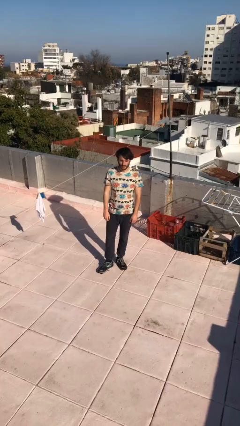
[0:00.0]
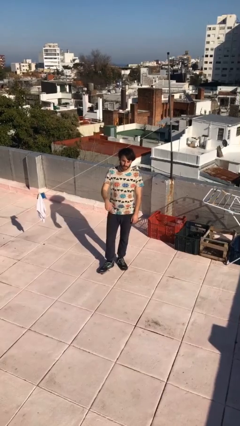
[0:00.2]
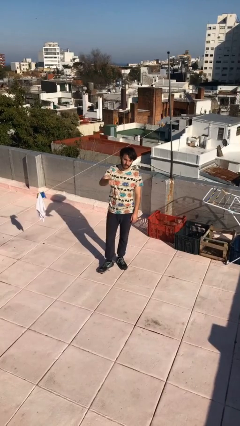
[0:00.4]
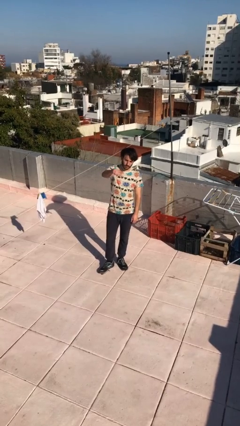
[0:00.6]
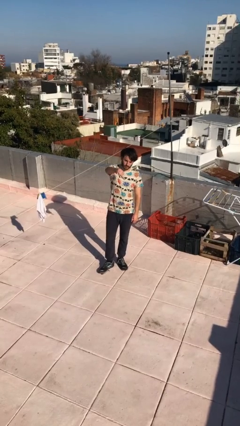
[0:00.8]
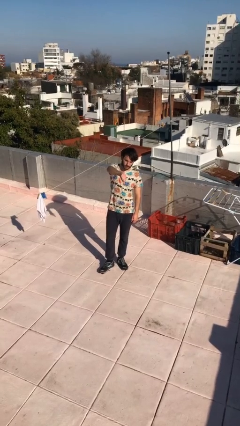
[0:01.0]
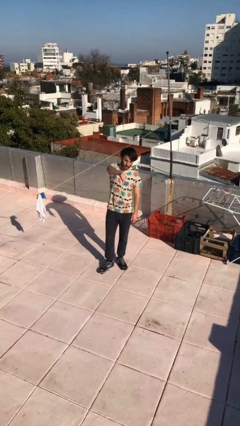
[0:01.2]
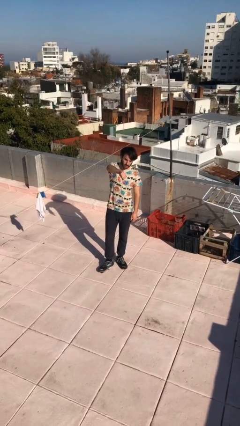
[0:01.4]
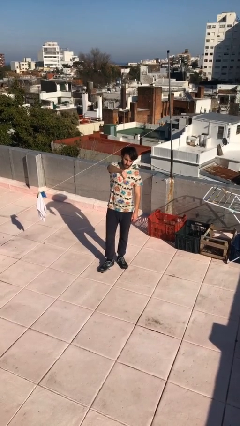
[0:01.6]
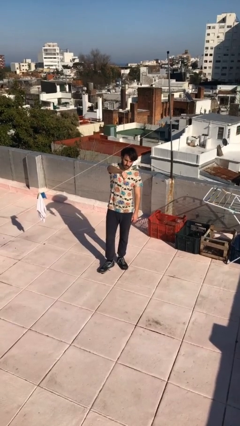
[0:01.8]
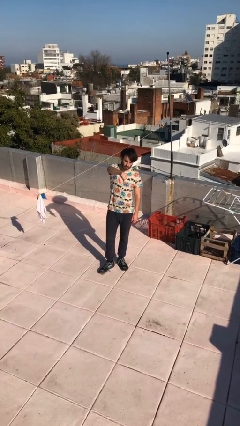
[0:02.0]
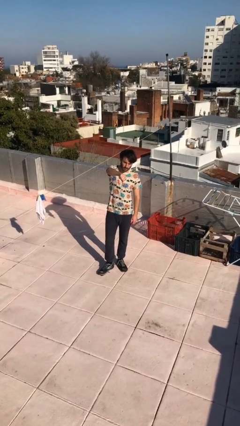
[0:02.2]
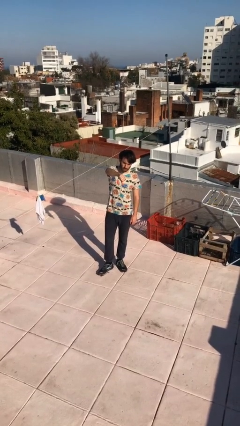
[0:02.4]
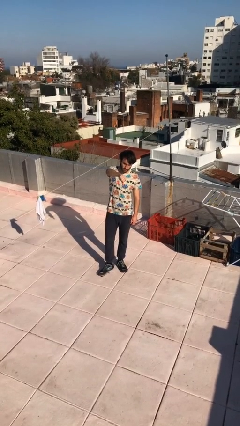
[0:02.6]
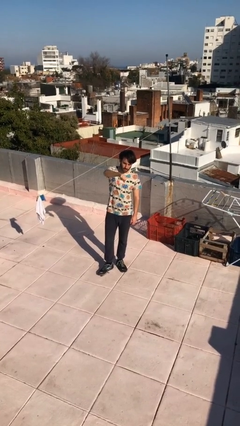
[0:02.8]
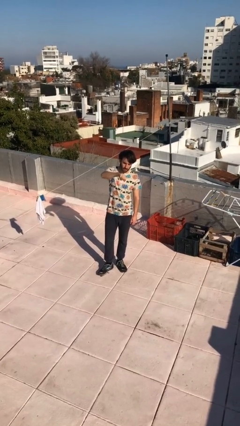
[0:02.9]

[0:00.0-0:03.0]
person gestures thumbs down

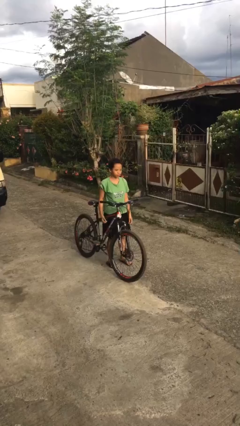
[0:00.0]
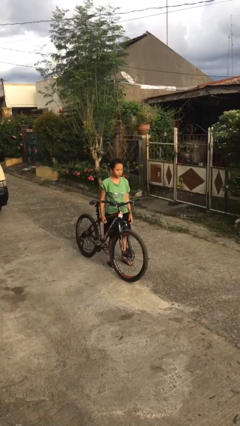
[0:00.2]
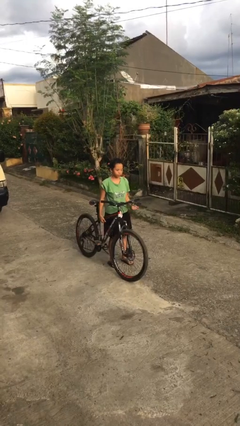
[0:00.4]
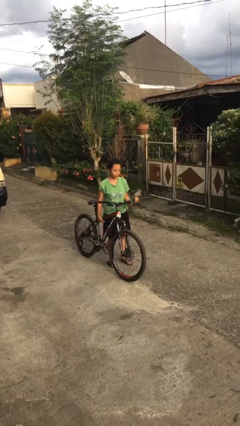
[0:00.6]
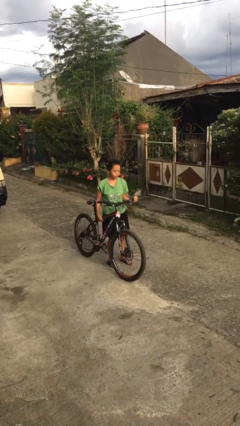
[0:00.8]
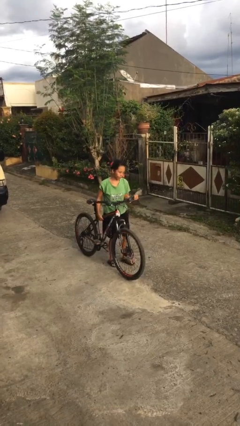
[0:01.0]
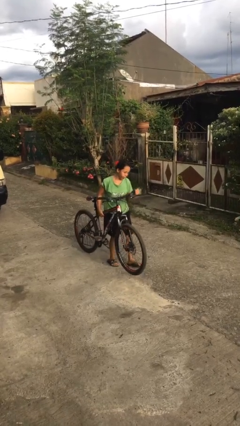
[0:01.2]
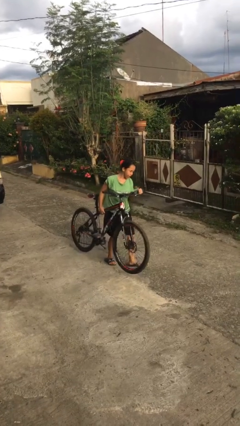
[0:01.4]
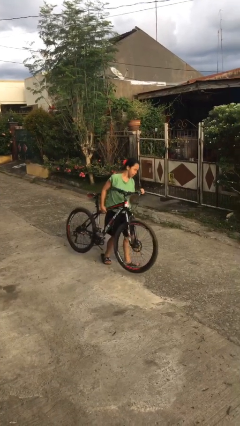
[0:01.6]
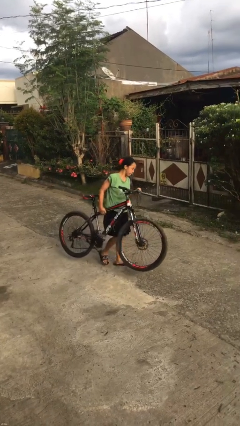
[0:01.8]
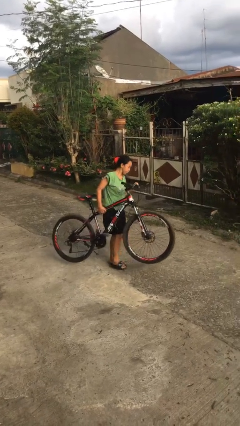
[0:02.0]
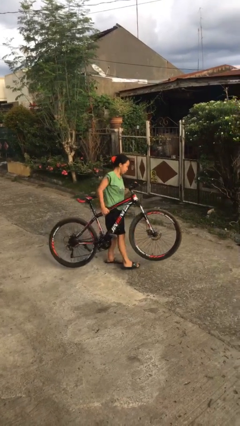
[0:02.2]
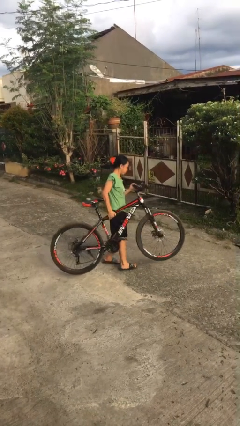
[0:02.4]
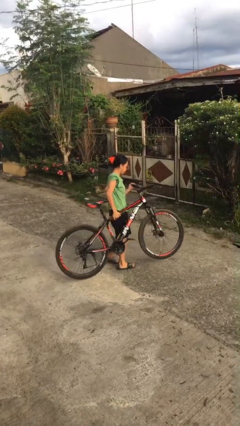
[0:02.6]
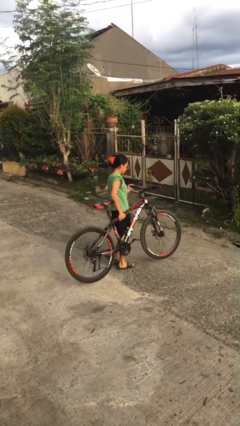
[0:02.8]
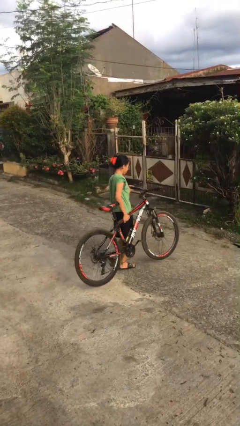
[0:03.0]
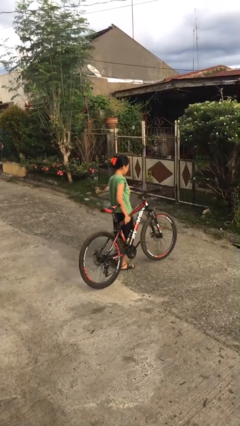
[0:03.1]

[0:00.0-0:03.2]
person carries bicycle

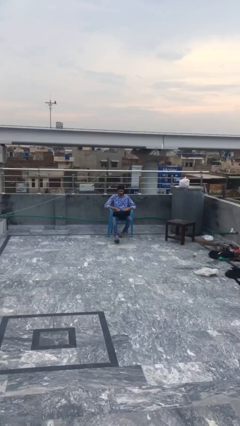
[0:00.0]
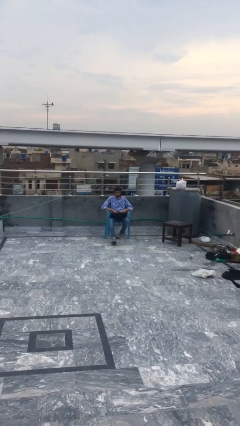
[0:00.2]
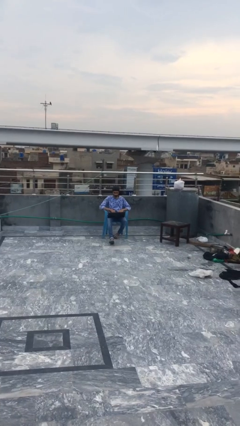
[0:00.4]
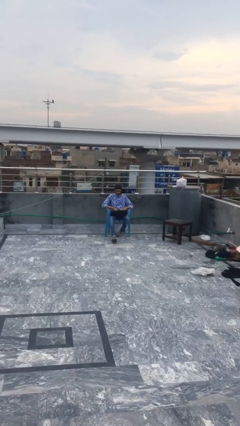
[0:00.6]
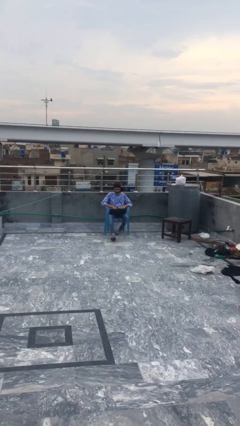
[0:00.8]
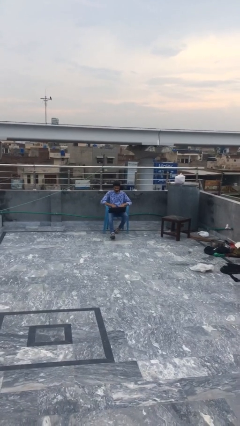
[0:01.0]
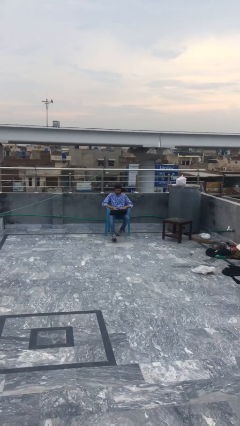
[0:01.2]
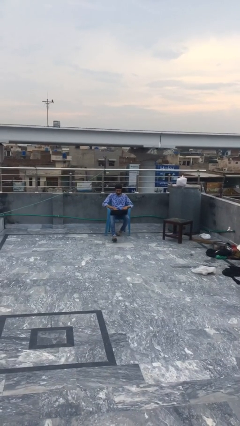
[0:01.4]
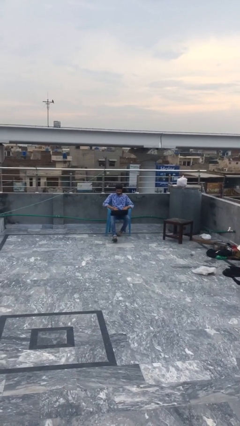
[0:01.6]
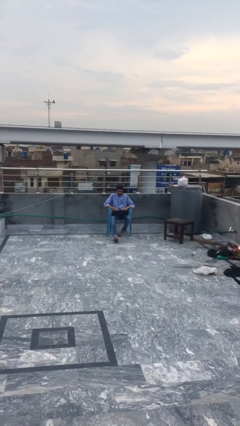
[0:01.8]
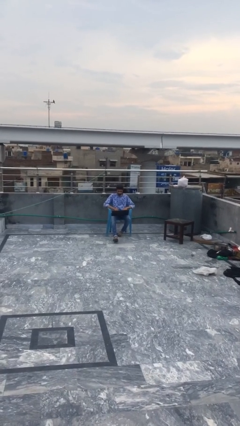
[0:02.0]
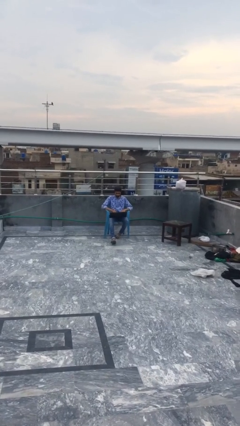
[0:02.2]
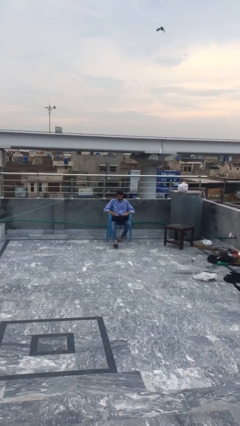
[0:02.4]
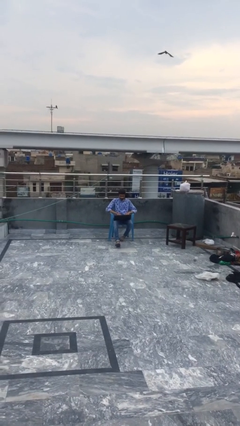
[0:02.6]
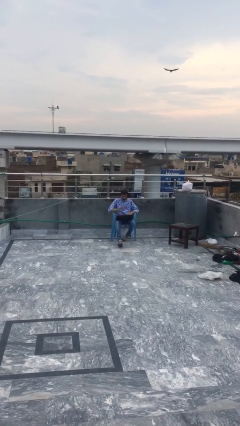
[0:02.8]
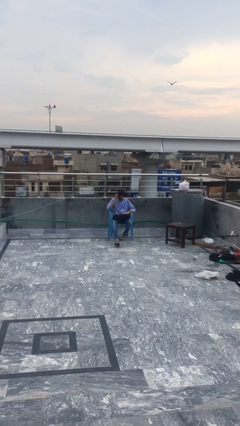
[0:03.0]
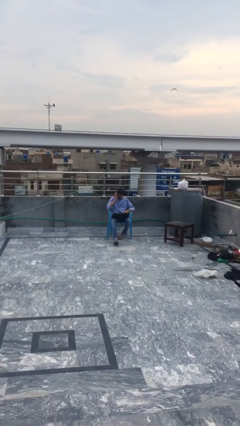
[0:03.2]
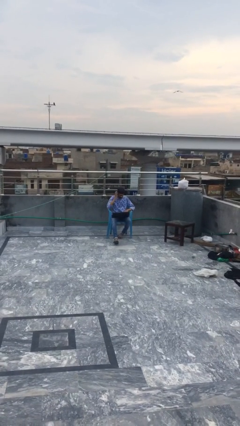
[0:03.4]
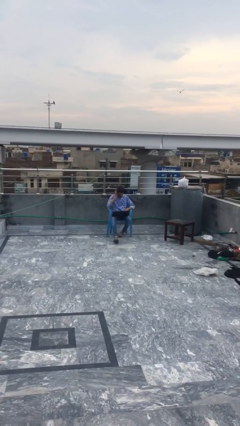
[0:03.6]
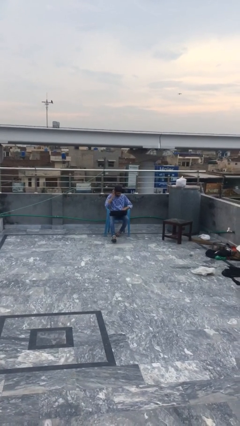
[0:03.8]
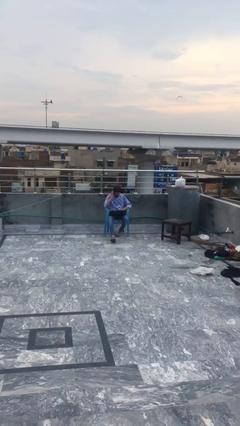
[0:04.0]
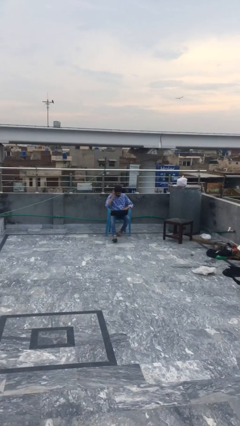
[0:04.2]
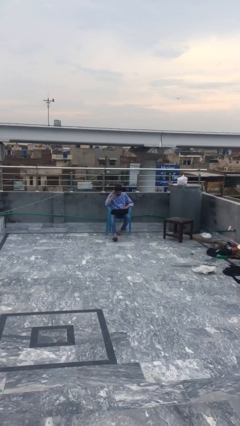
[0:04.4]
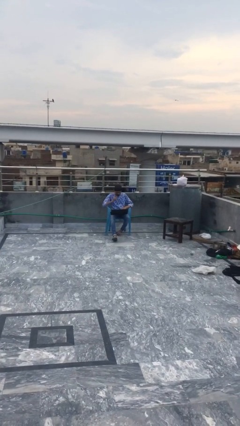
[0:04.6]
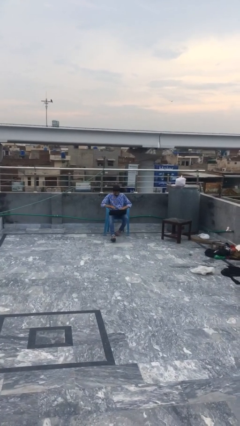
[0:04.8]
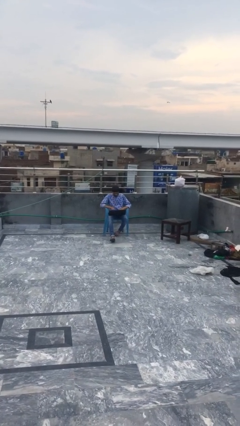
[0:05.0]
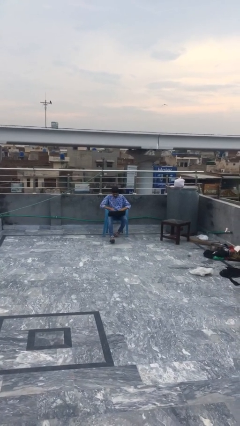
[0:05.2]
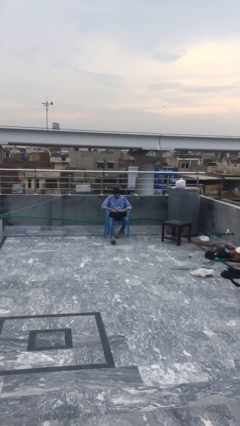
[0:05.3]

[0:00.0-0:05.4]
person interacts with laptop

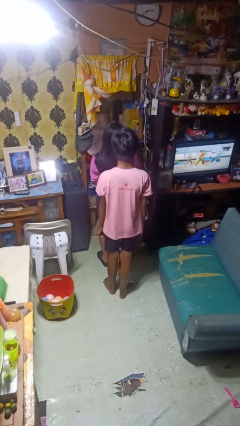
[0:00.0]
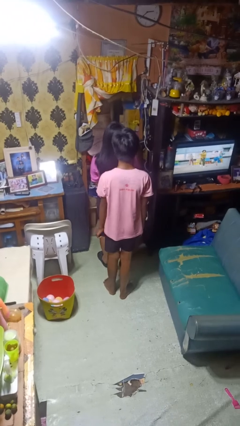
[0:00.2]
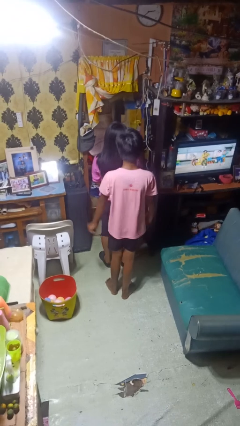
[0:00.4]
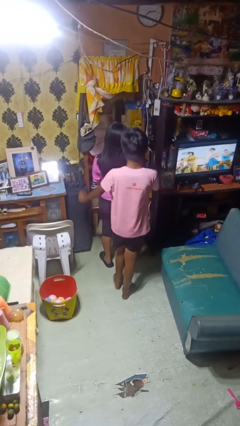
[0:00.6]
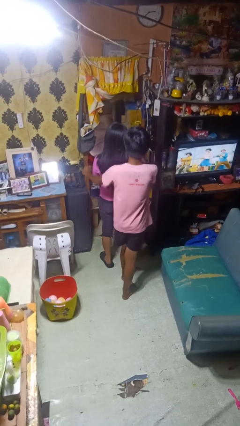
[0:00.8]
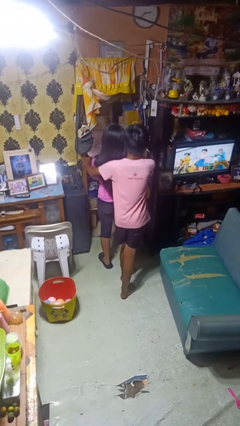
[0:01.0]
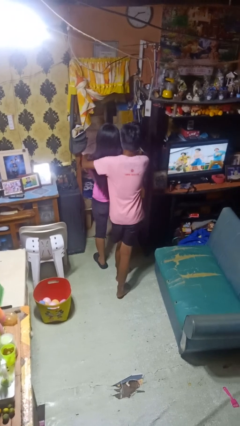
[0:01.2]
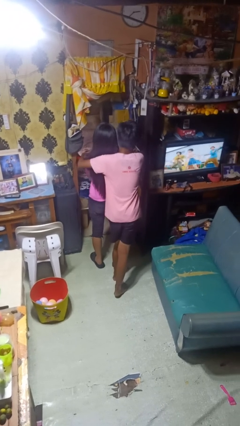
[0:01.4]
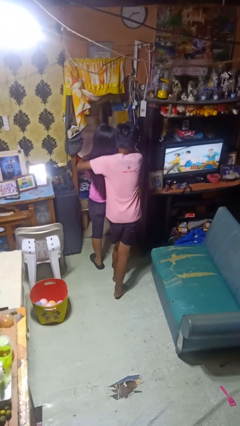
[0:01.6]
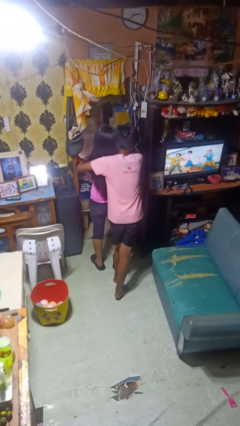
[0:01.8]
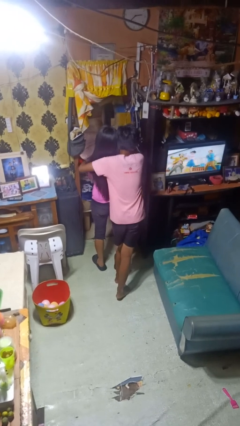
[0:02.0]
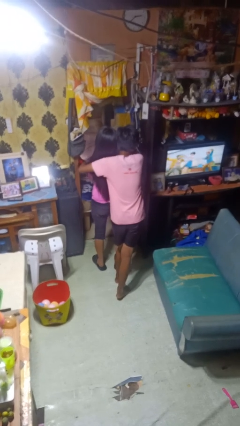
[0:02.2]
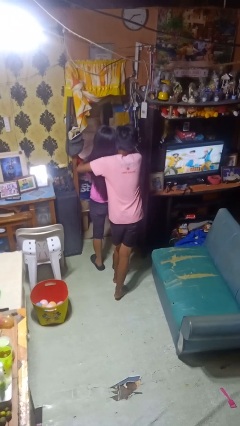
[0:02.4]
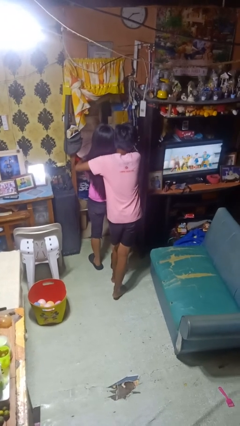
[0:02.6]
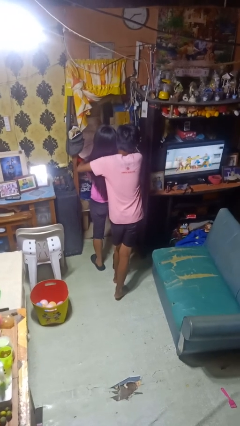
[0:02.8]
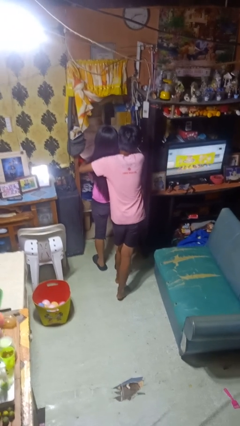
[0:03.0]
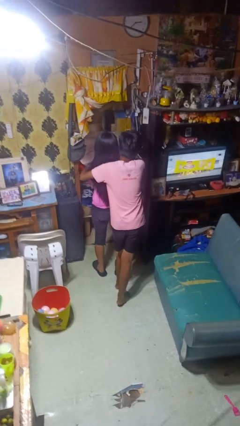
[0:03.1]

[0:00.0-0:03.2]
person hugs person from behind

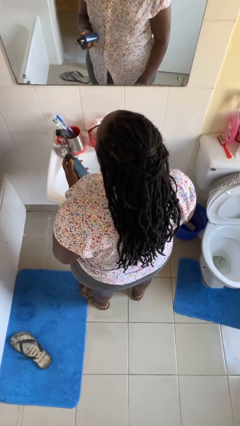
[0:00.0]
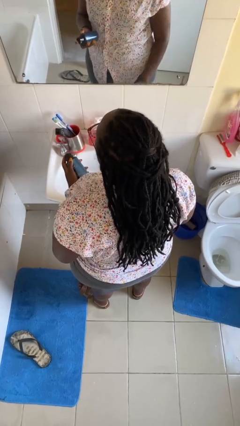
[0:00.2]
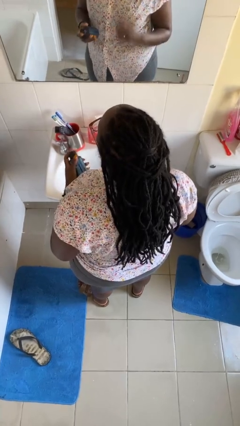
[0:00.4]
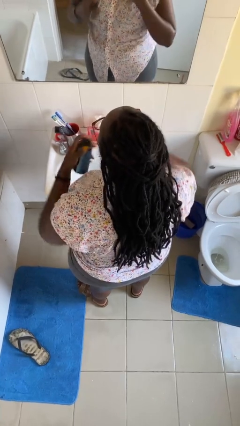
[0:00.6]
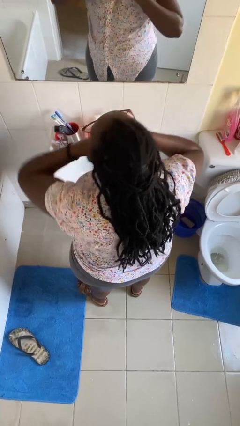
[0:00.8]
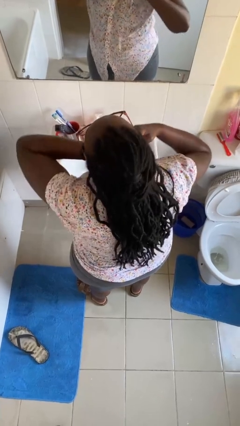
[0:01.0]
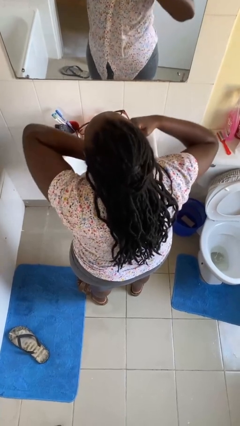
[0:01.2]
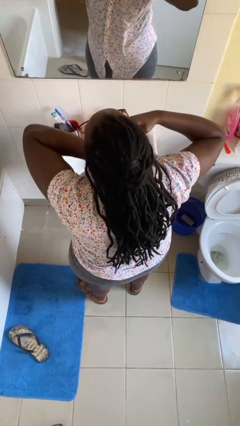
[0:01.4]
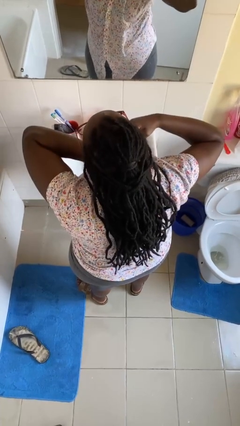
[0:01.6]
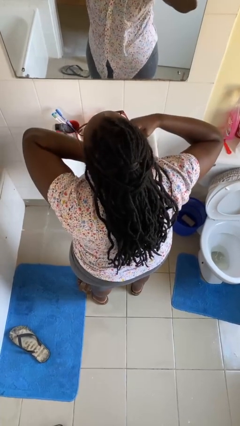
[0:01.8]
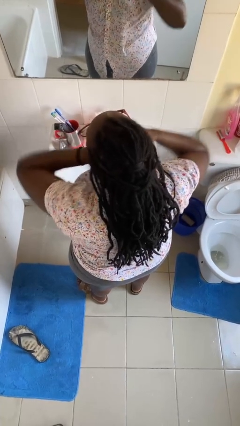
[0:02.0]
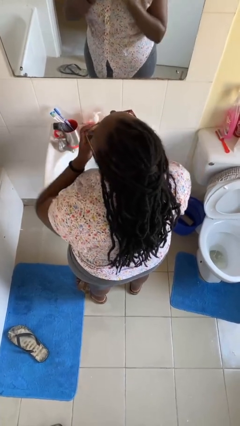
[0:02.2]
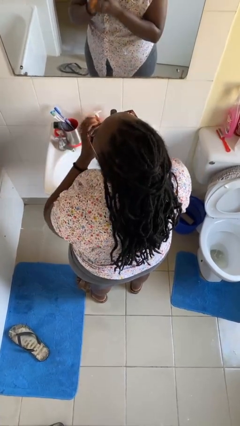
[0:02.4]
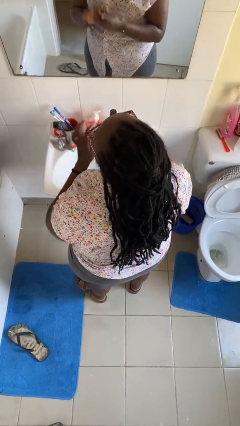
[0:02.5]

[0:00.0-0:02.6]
person applies deodorant

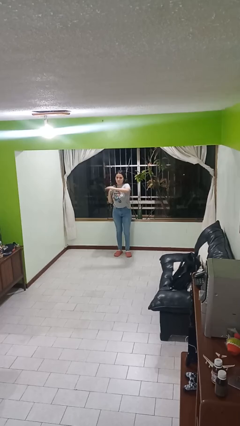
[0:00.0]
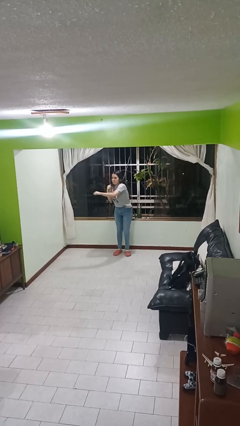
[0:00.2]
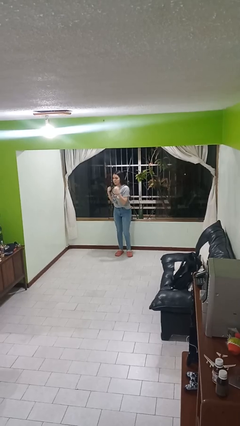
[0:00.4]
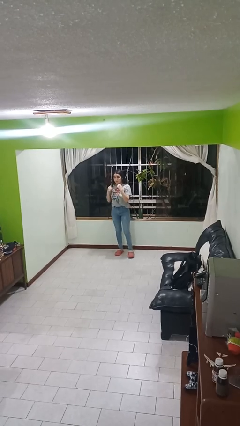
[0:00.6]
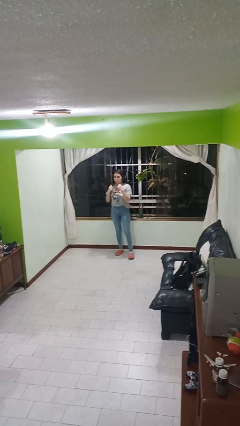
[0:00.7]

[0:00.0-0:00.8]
person punches
